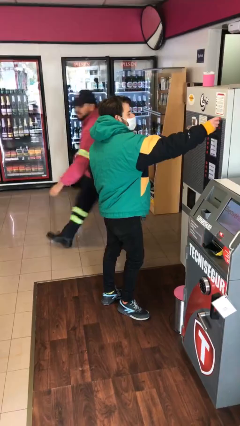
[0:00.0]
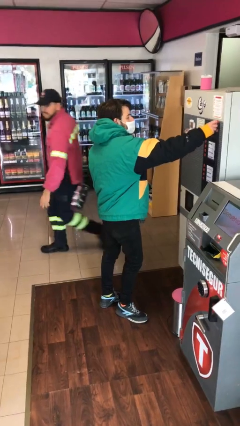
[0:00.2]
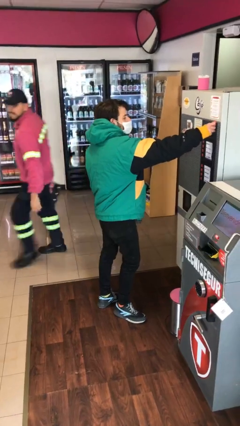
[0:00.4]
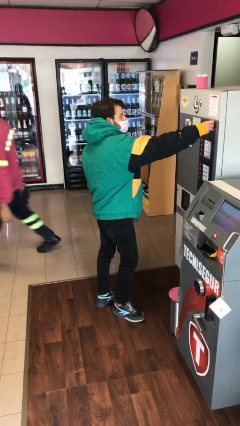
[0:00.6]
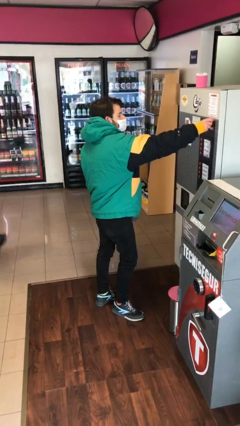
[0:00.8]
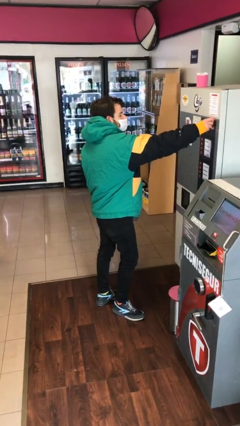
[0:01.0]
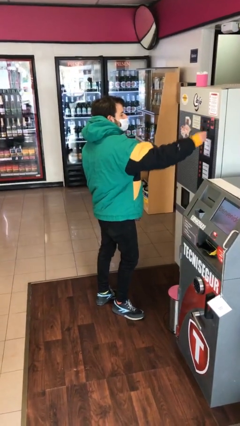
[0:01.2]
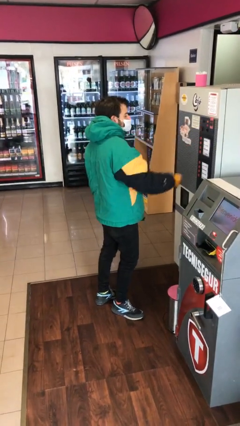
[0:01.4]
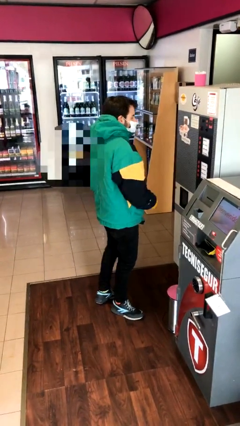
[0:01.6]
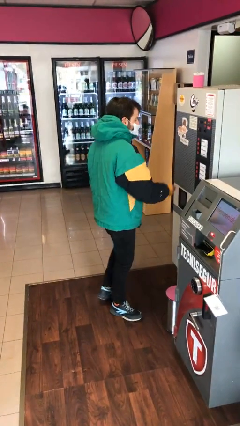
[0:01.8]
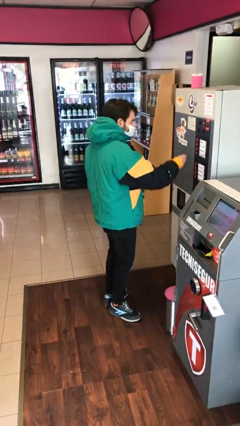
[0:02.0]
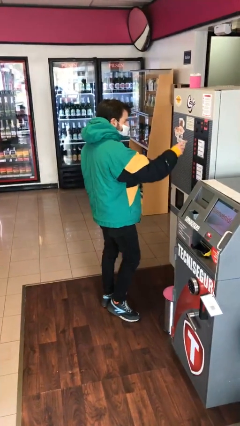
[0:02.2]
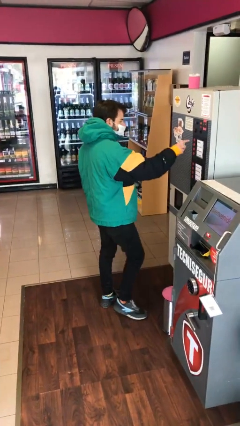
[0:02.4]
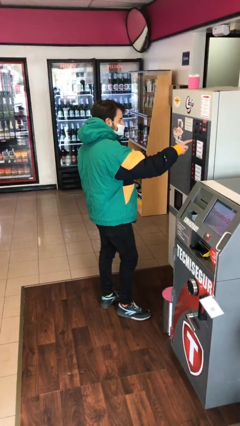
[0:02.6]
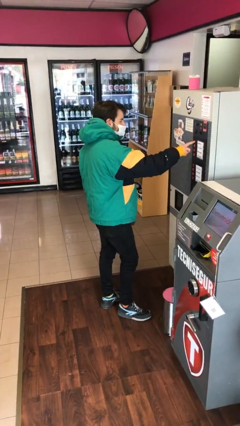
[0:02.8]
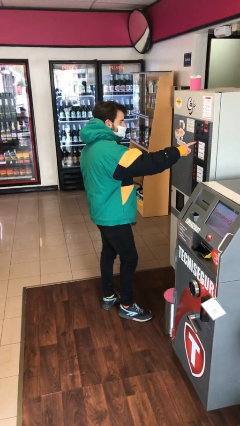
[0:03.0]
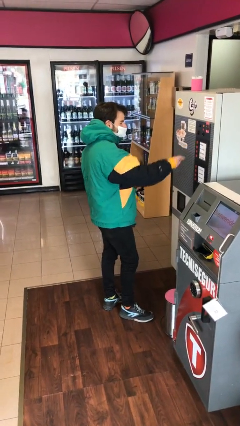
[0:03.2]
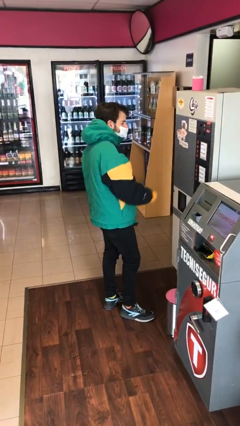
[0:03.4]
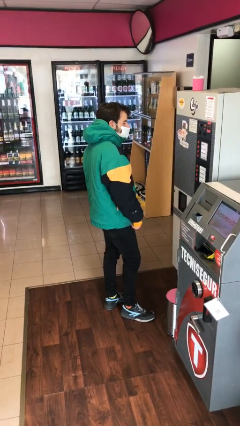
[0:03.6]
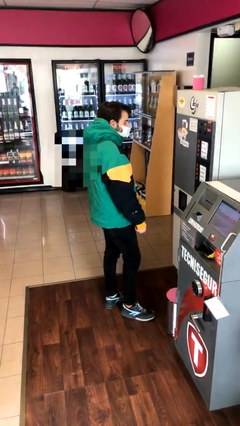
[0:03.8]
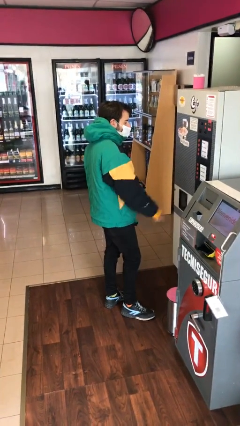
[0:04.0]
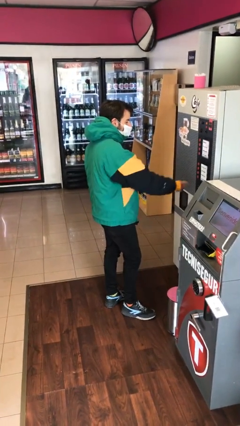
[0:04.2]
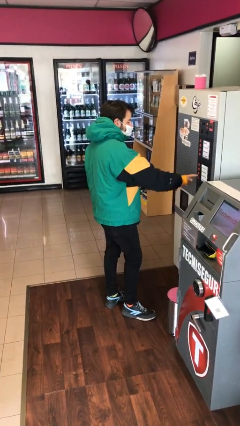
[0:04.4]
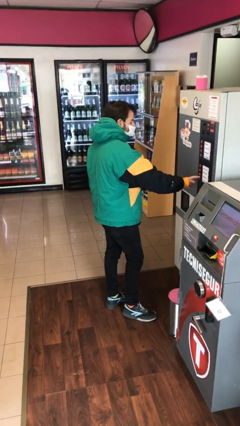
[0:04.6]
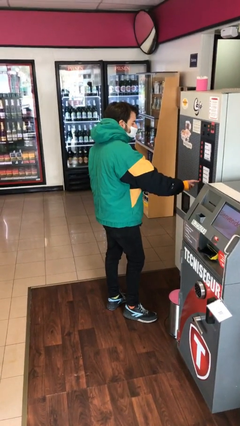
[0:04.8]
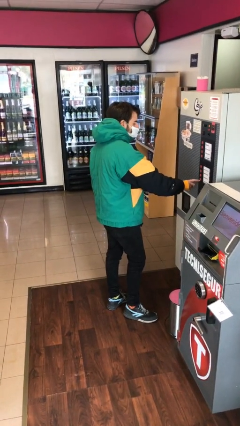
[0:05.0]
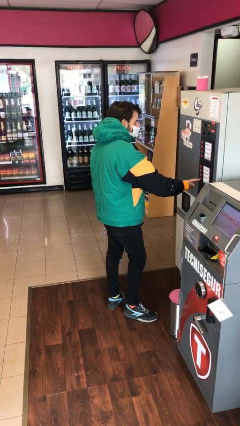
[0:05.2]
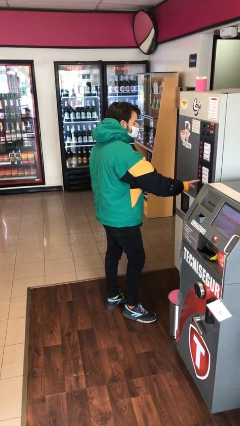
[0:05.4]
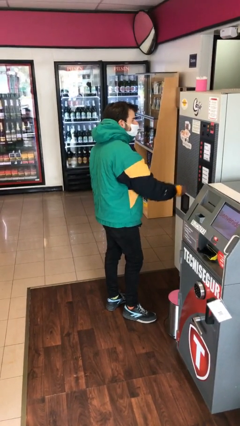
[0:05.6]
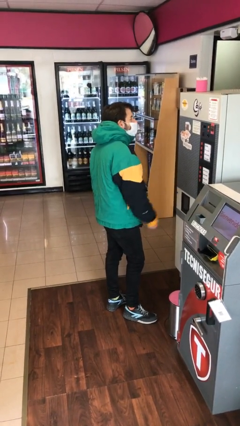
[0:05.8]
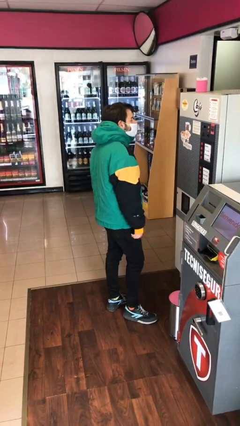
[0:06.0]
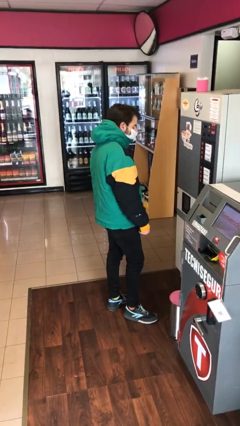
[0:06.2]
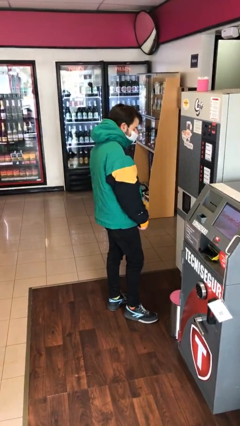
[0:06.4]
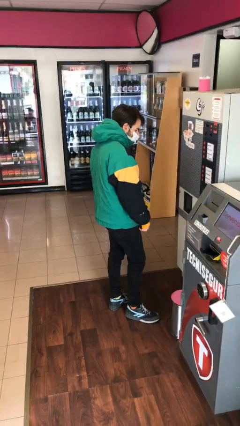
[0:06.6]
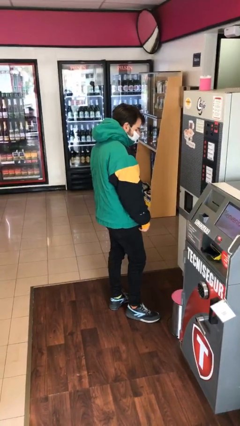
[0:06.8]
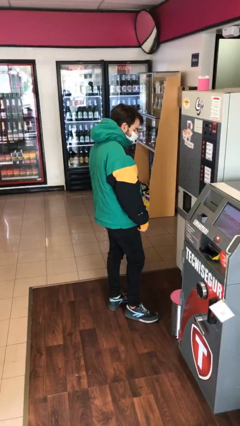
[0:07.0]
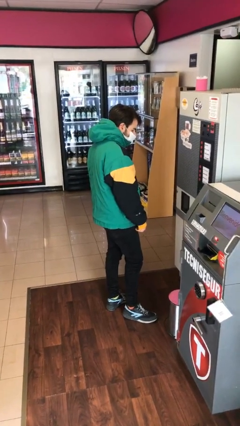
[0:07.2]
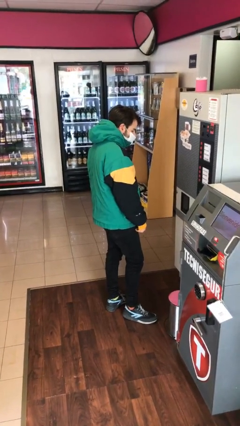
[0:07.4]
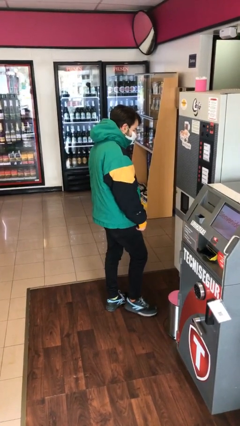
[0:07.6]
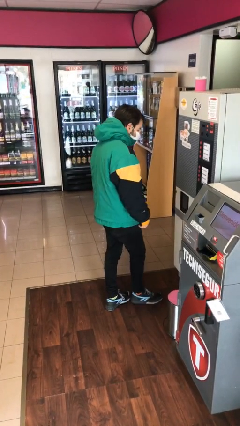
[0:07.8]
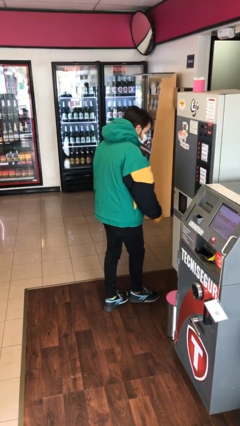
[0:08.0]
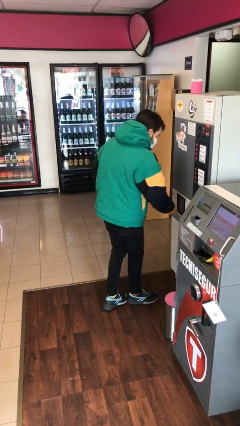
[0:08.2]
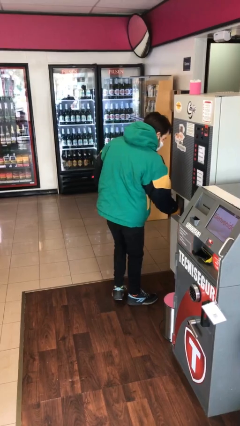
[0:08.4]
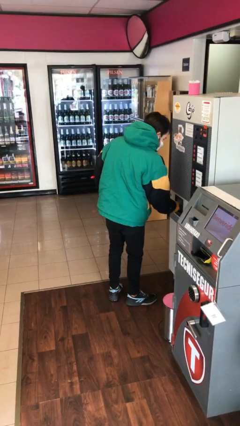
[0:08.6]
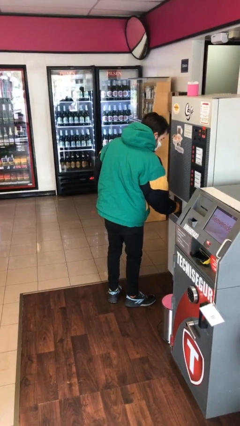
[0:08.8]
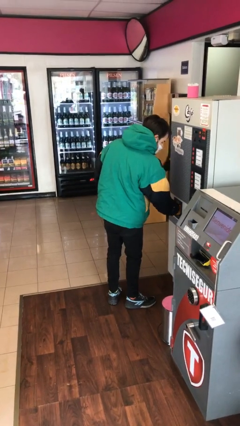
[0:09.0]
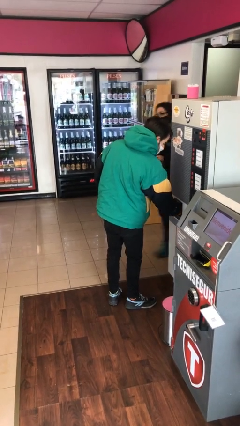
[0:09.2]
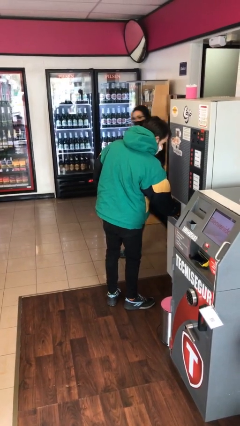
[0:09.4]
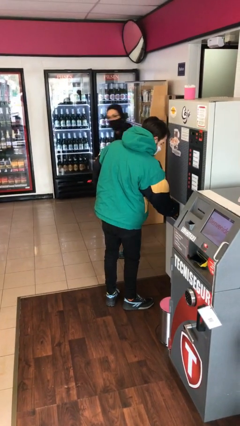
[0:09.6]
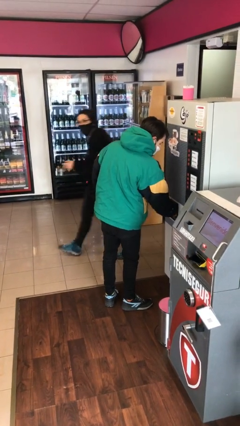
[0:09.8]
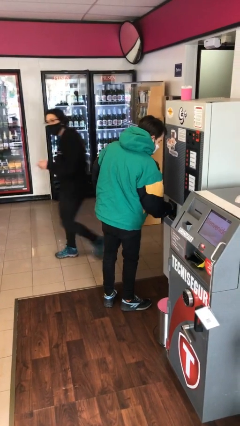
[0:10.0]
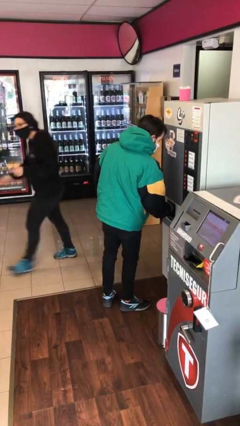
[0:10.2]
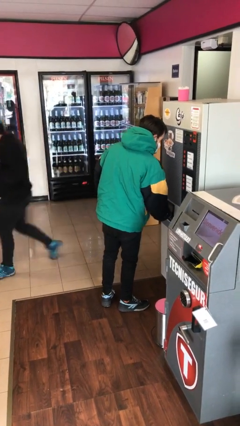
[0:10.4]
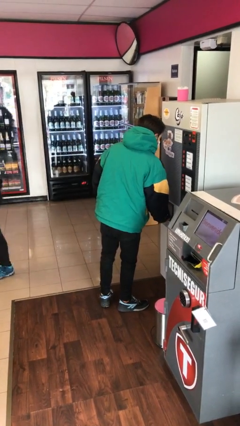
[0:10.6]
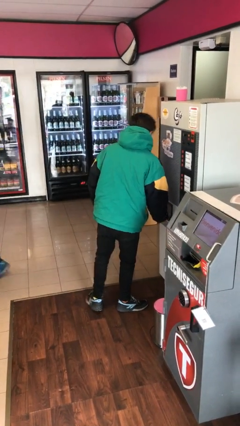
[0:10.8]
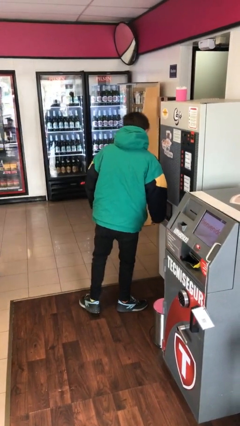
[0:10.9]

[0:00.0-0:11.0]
person purchases from machine

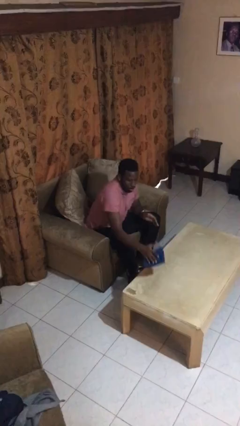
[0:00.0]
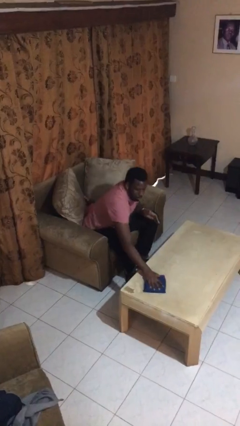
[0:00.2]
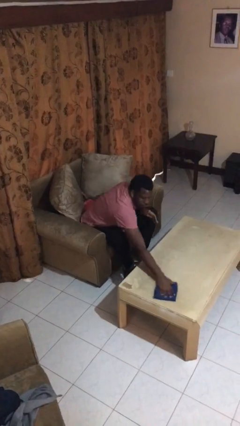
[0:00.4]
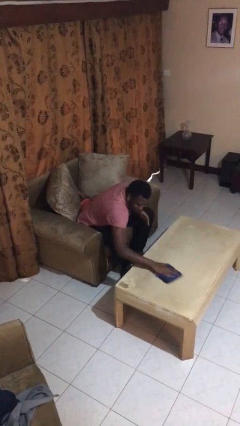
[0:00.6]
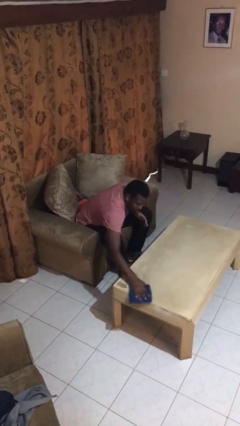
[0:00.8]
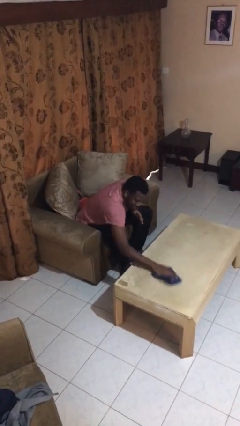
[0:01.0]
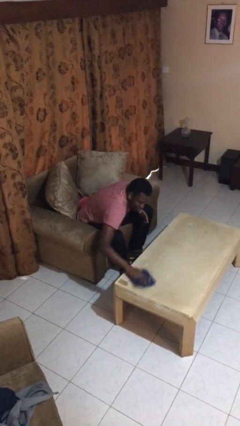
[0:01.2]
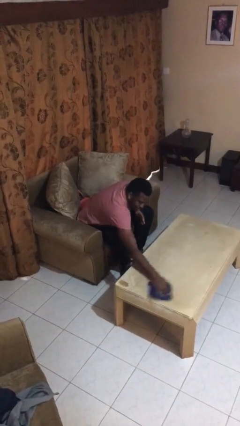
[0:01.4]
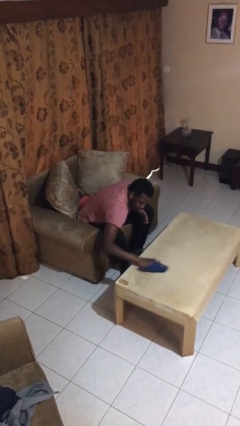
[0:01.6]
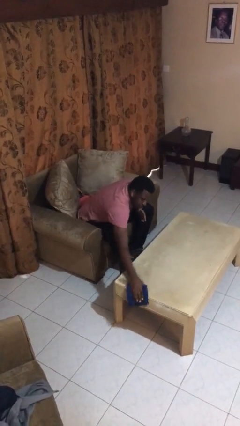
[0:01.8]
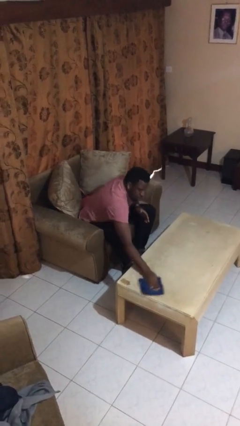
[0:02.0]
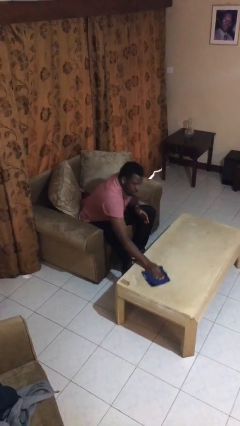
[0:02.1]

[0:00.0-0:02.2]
person cleans table with rag

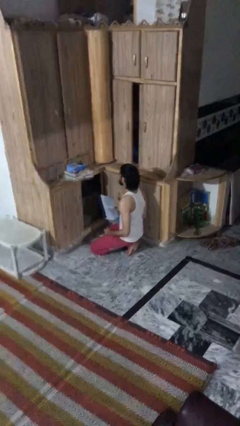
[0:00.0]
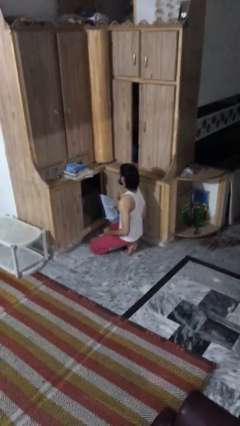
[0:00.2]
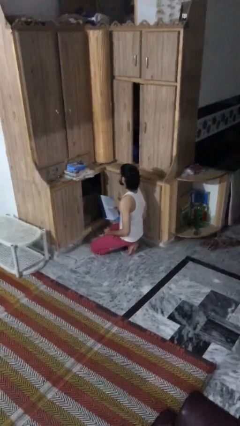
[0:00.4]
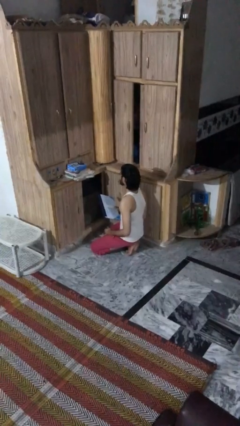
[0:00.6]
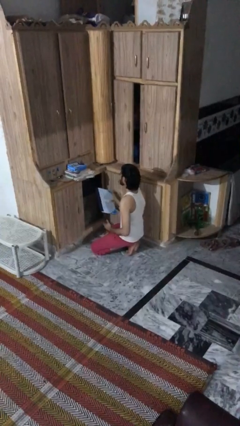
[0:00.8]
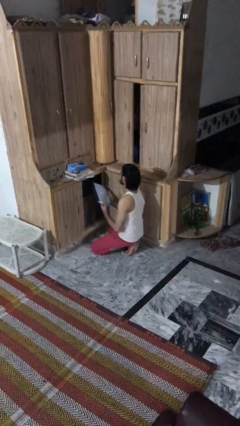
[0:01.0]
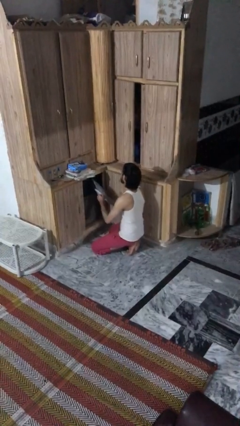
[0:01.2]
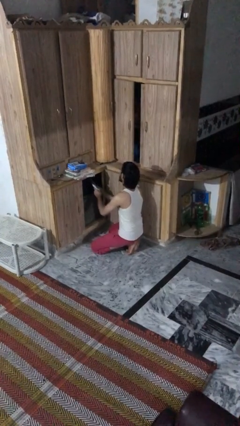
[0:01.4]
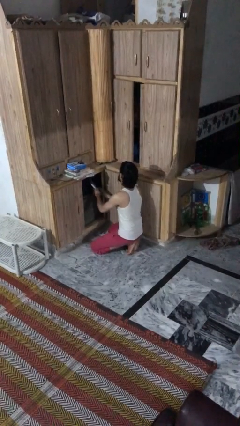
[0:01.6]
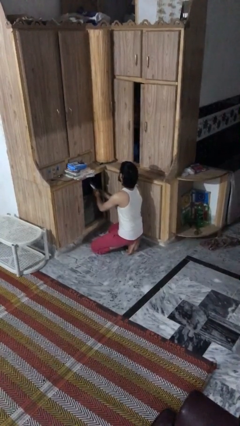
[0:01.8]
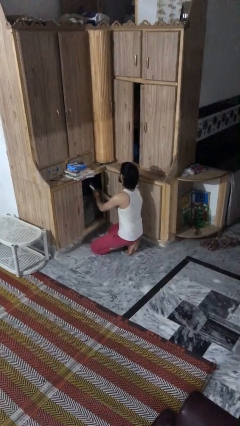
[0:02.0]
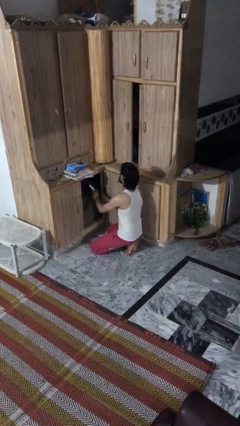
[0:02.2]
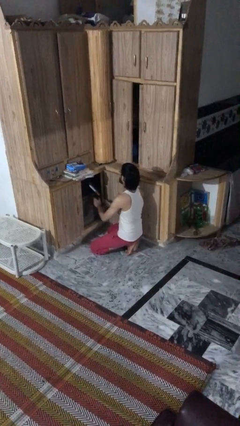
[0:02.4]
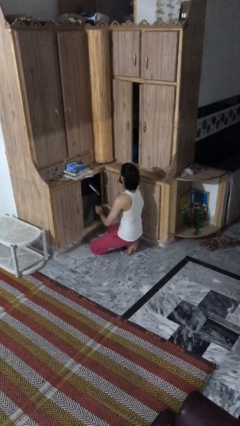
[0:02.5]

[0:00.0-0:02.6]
person puts down object into cabinet

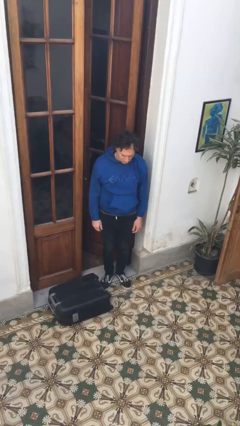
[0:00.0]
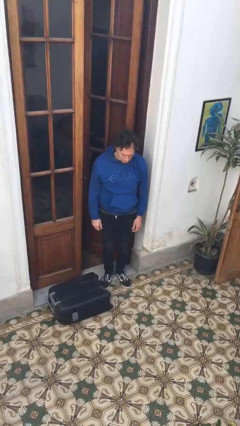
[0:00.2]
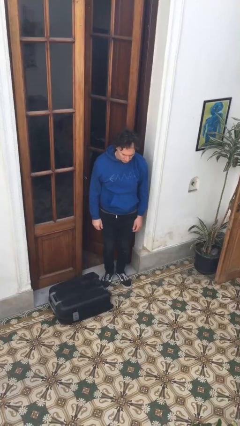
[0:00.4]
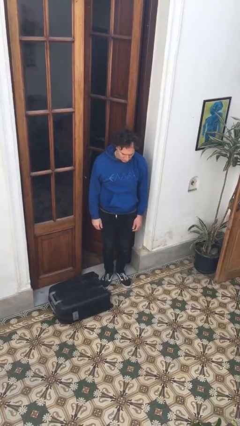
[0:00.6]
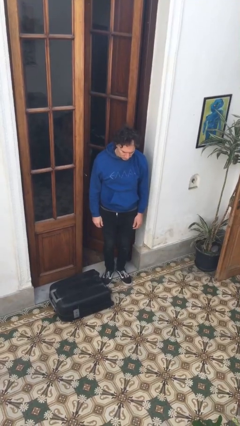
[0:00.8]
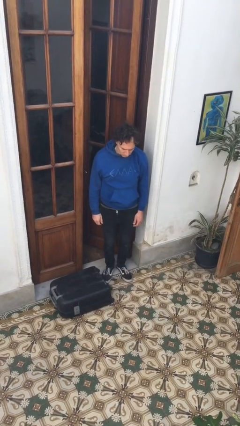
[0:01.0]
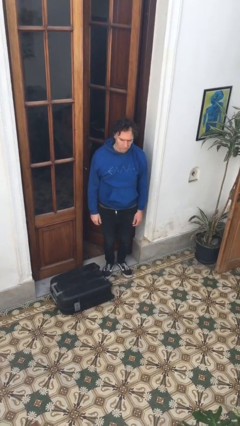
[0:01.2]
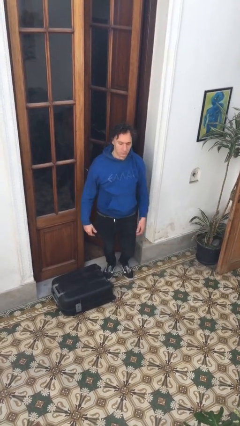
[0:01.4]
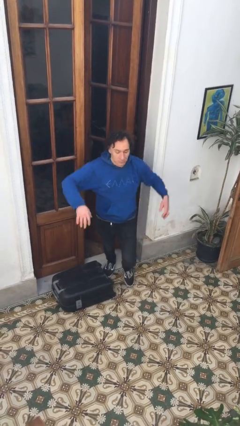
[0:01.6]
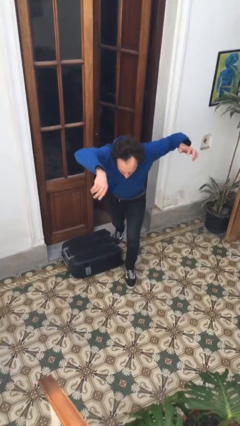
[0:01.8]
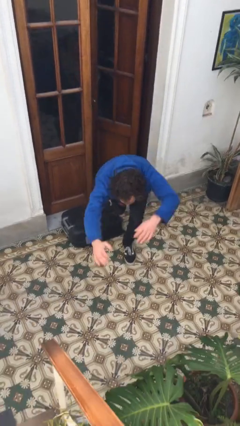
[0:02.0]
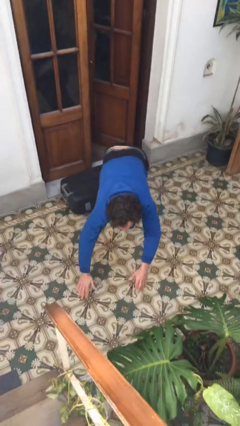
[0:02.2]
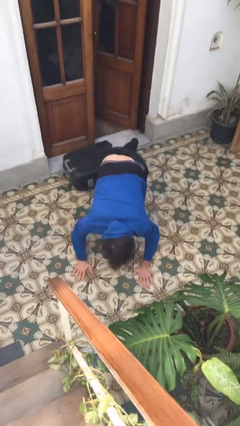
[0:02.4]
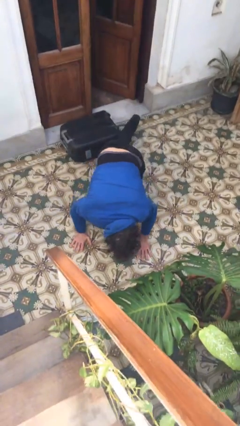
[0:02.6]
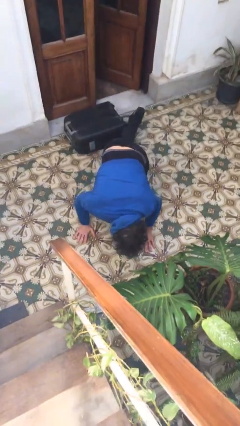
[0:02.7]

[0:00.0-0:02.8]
person trips on object on floor
